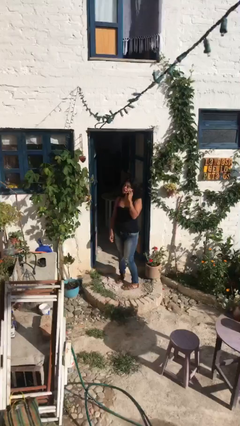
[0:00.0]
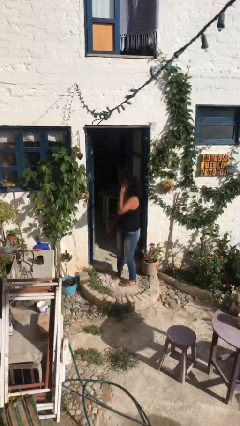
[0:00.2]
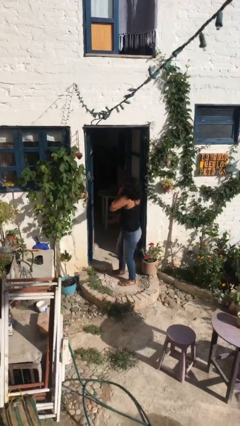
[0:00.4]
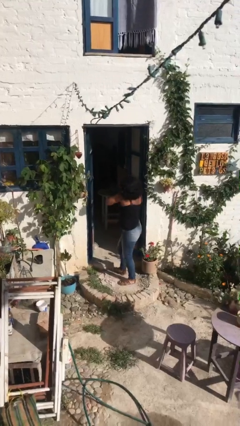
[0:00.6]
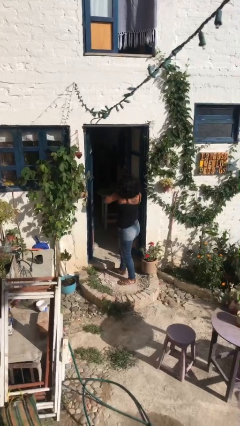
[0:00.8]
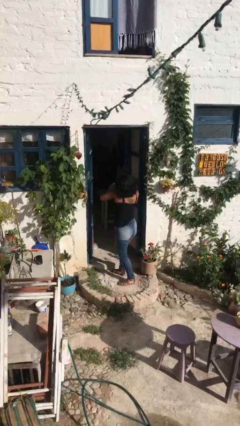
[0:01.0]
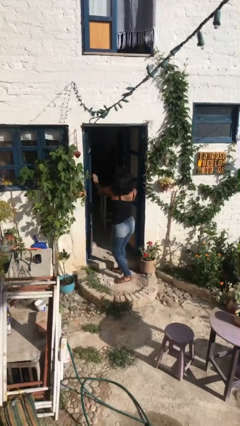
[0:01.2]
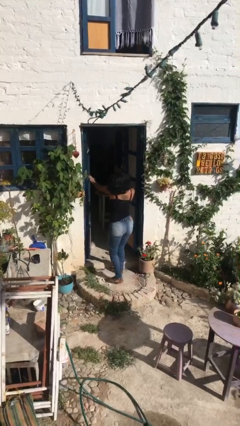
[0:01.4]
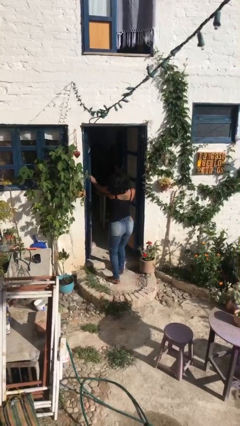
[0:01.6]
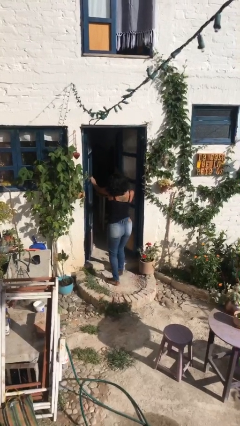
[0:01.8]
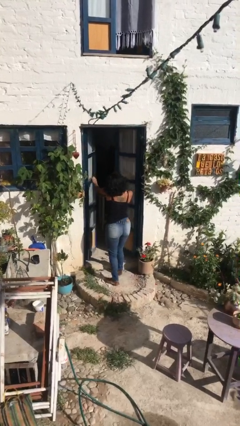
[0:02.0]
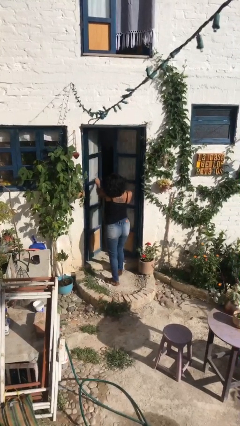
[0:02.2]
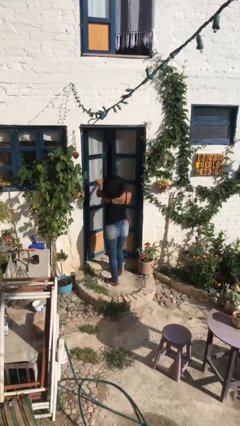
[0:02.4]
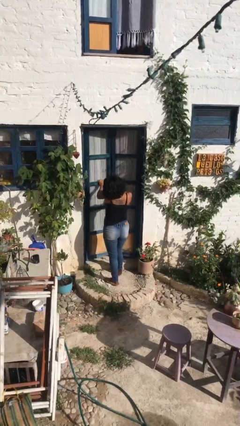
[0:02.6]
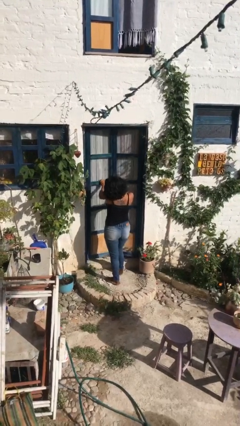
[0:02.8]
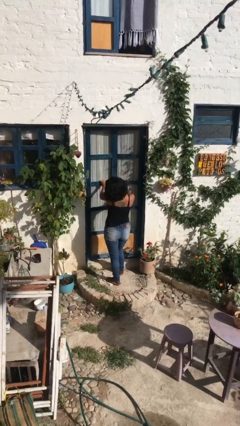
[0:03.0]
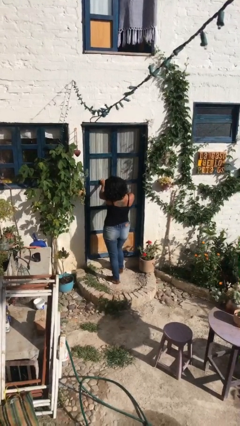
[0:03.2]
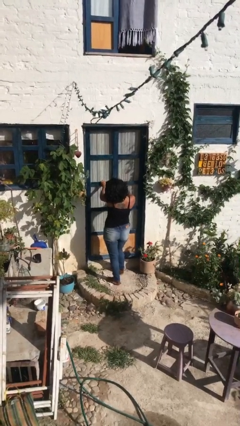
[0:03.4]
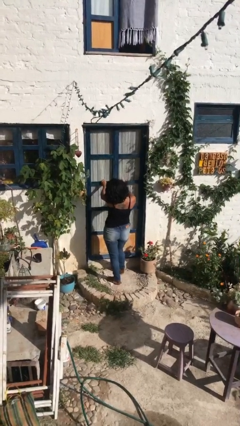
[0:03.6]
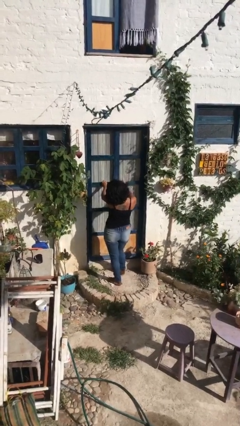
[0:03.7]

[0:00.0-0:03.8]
person closes facility door

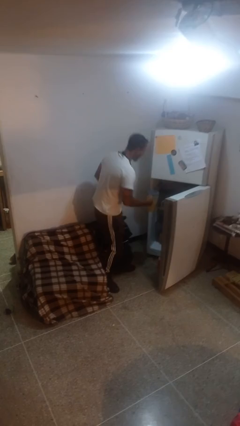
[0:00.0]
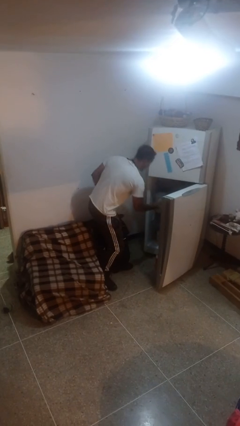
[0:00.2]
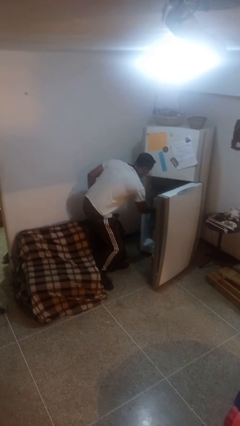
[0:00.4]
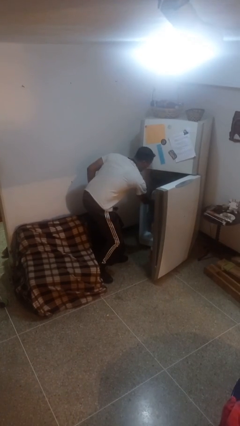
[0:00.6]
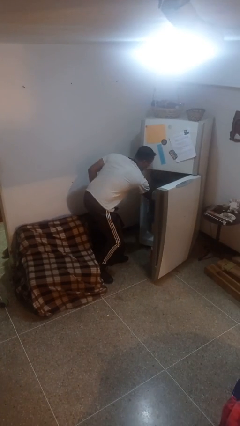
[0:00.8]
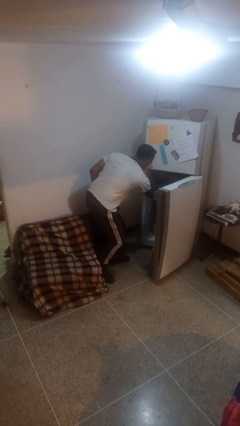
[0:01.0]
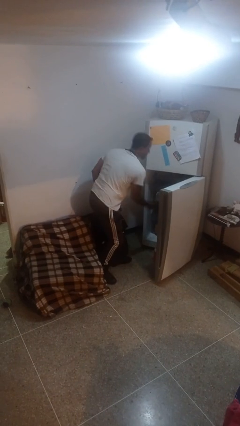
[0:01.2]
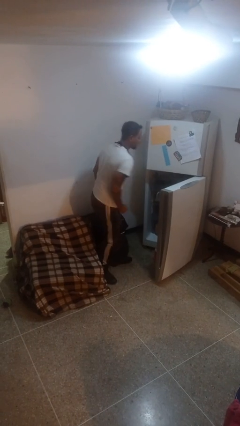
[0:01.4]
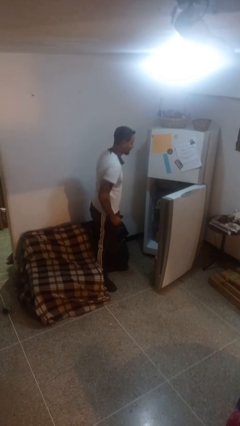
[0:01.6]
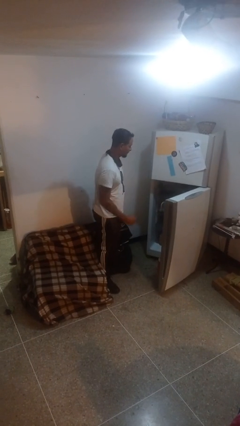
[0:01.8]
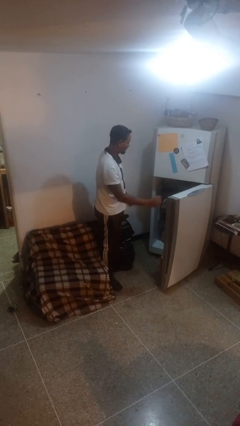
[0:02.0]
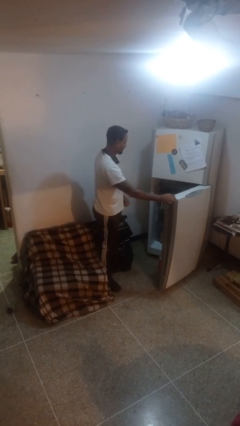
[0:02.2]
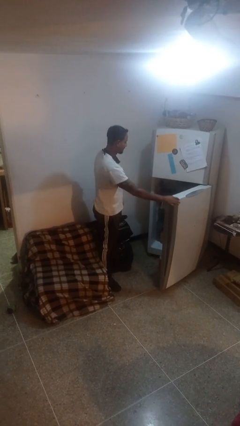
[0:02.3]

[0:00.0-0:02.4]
person puts object into refrigerator

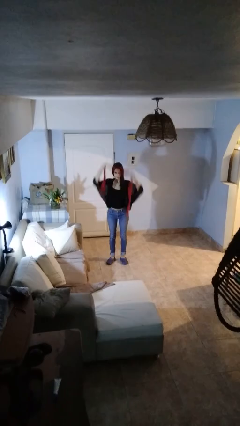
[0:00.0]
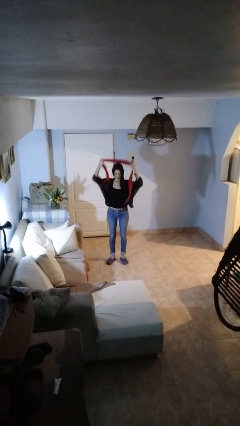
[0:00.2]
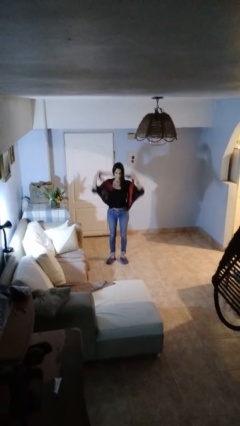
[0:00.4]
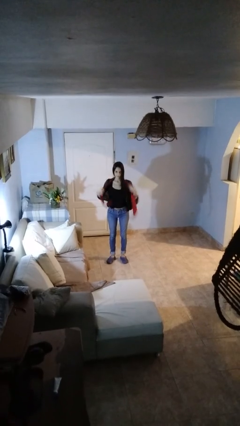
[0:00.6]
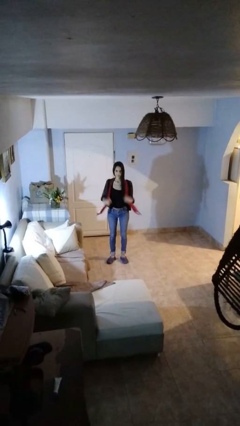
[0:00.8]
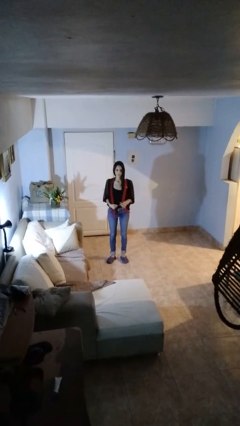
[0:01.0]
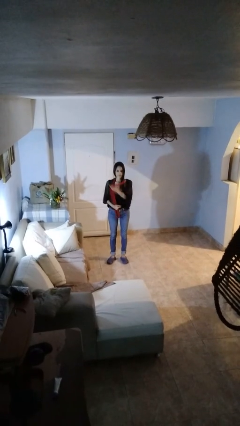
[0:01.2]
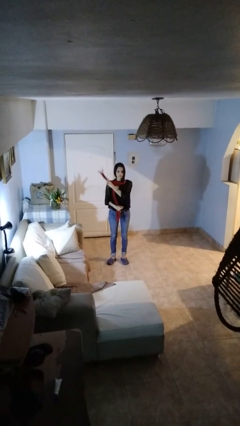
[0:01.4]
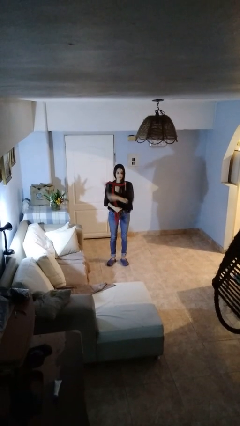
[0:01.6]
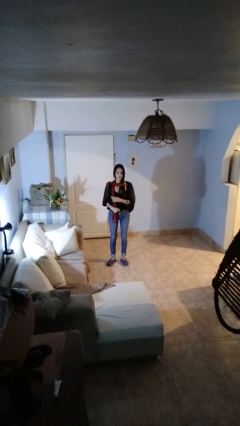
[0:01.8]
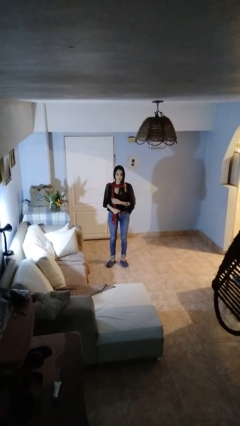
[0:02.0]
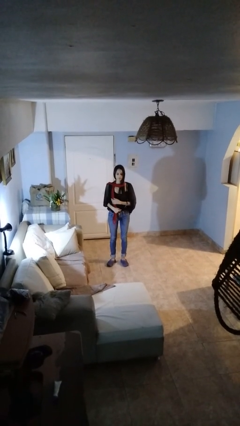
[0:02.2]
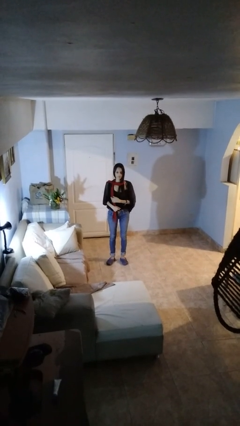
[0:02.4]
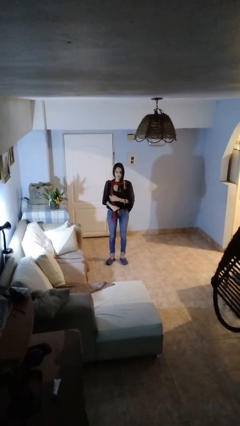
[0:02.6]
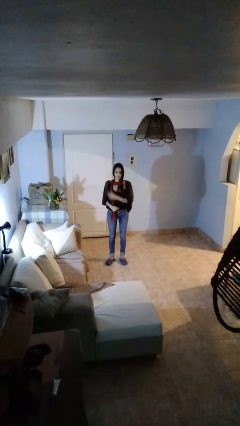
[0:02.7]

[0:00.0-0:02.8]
person puts on scarf

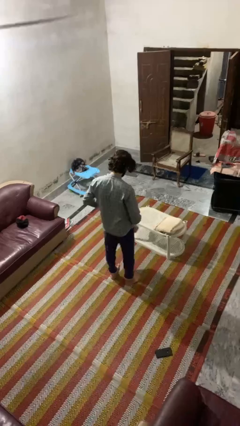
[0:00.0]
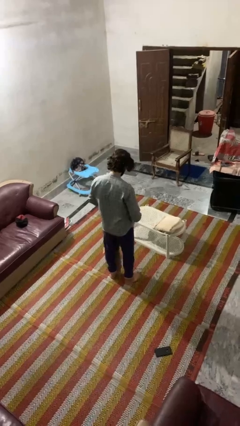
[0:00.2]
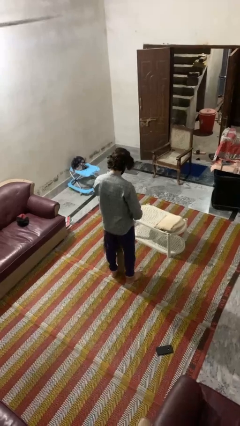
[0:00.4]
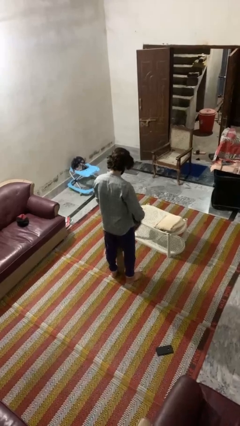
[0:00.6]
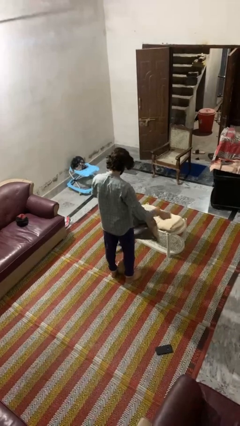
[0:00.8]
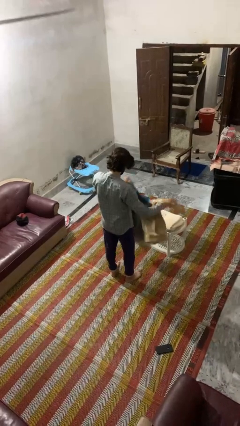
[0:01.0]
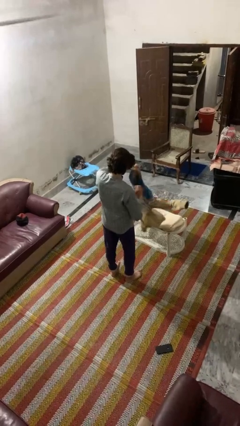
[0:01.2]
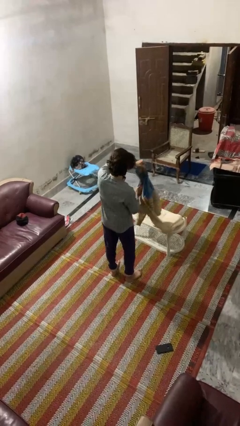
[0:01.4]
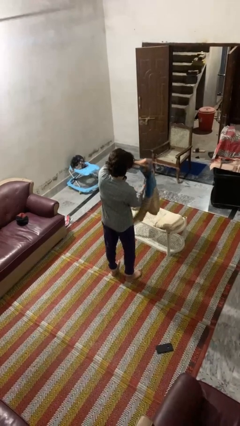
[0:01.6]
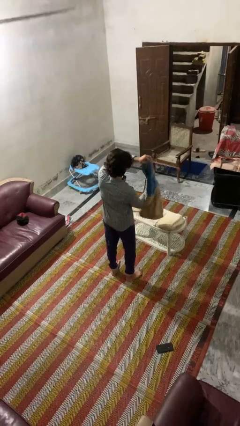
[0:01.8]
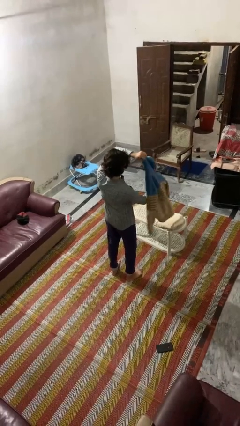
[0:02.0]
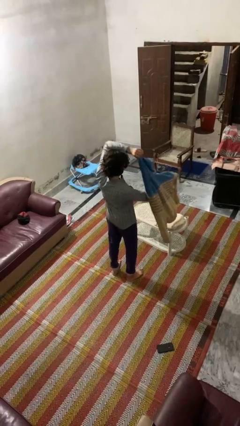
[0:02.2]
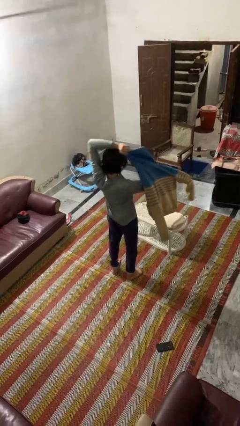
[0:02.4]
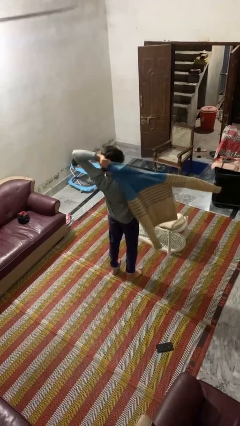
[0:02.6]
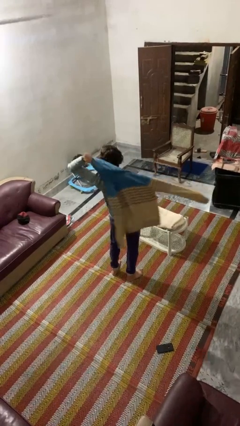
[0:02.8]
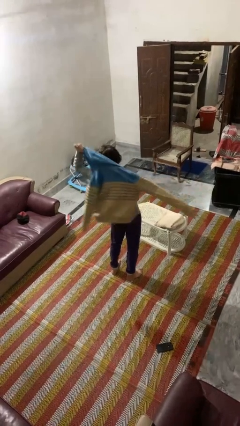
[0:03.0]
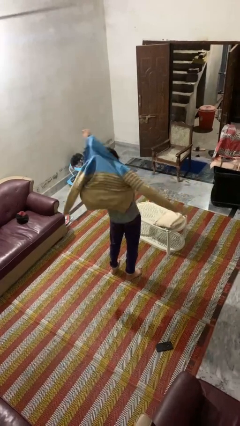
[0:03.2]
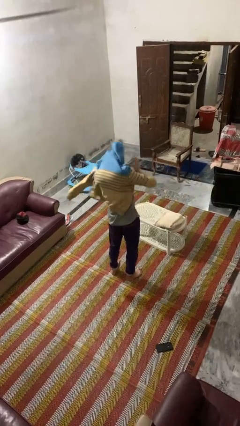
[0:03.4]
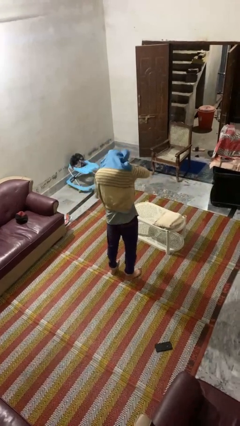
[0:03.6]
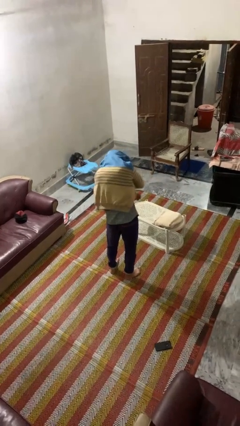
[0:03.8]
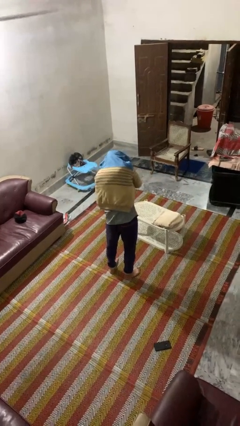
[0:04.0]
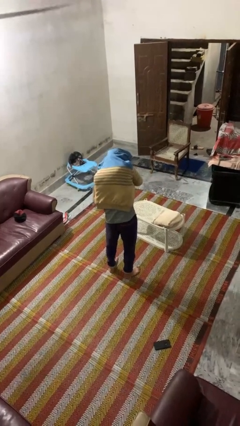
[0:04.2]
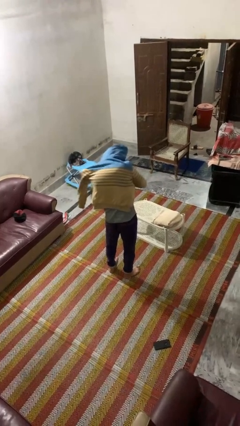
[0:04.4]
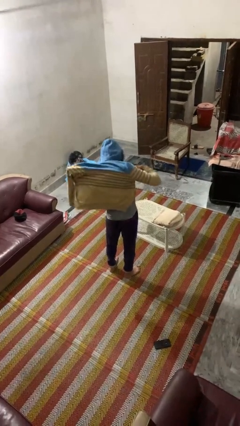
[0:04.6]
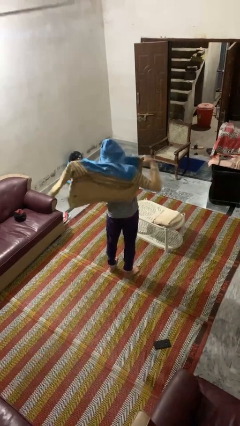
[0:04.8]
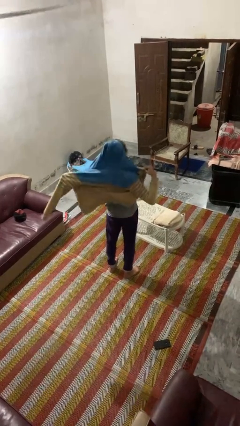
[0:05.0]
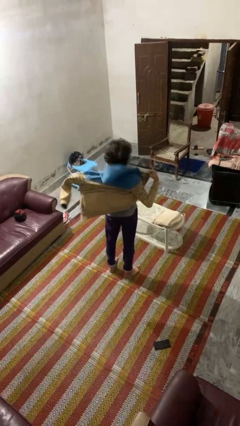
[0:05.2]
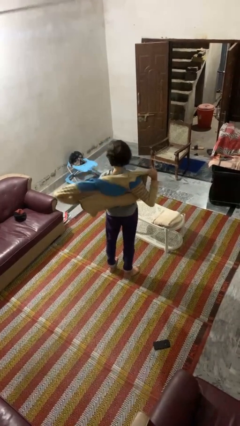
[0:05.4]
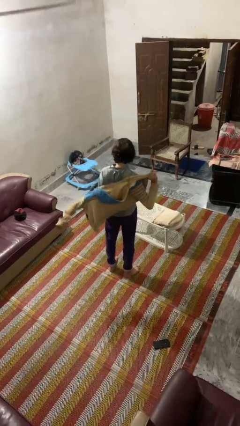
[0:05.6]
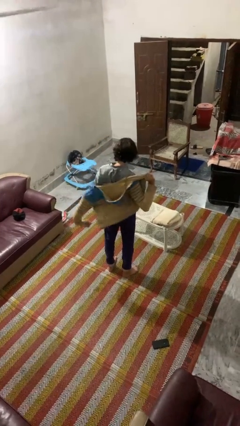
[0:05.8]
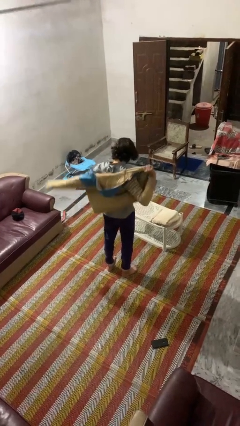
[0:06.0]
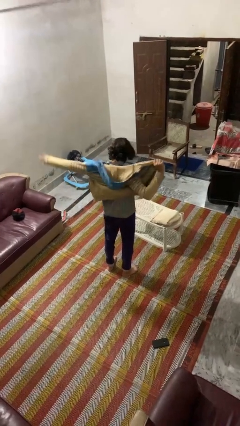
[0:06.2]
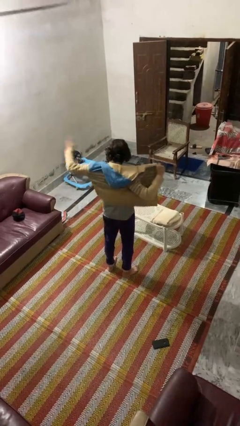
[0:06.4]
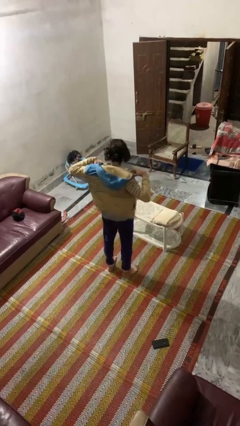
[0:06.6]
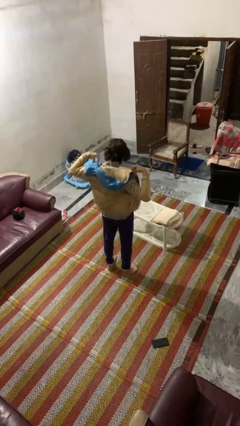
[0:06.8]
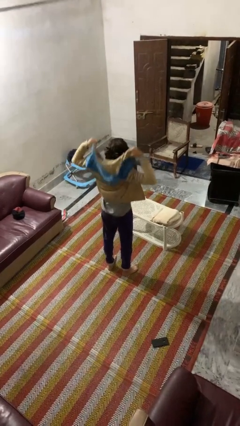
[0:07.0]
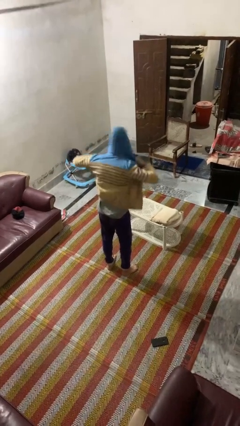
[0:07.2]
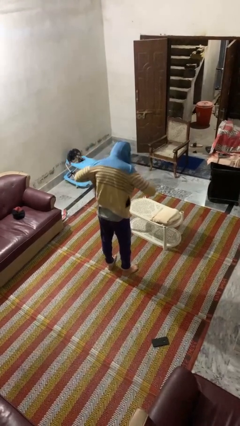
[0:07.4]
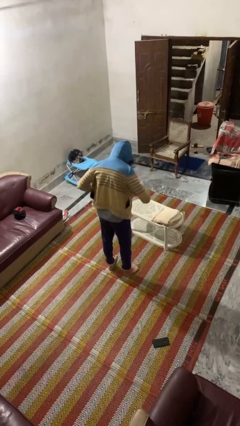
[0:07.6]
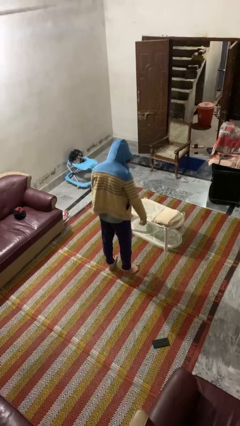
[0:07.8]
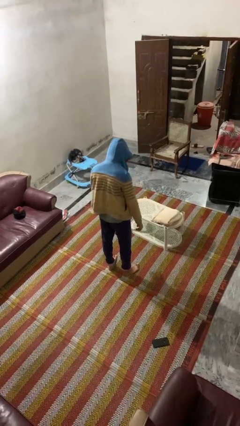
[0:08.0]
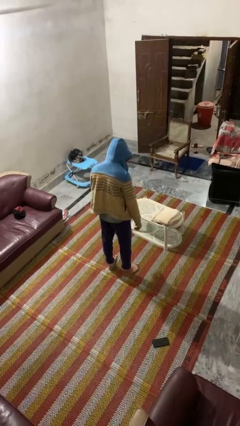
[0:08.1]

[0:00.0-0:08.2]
person puts on hoodie

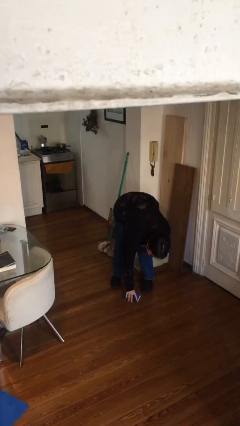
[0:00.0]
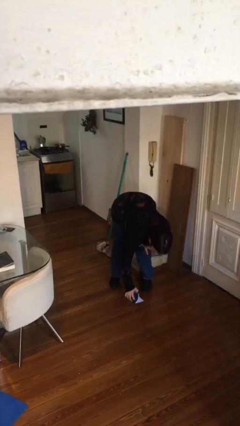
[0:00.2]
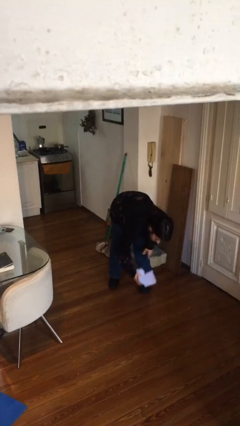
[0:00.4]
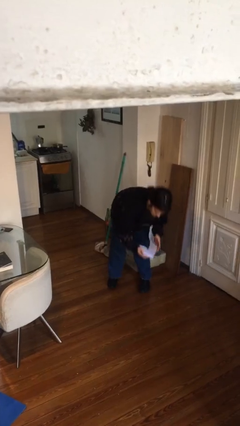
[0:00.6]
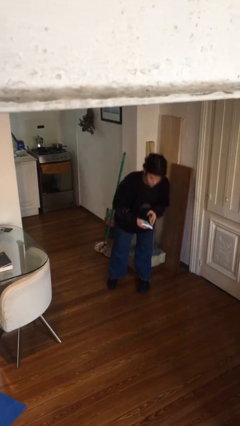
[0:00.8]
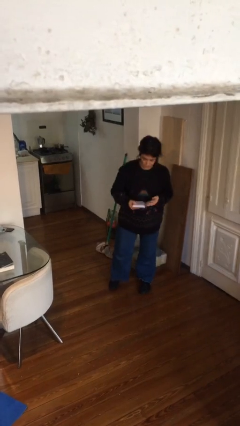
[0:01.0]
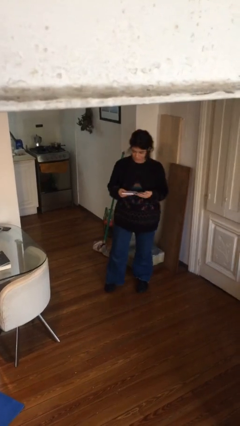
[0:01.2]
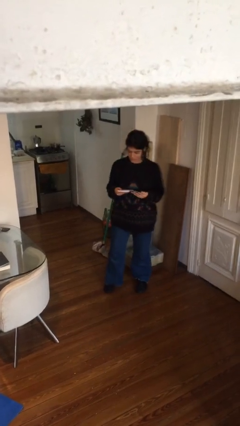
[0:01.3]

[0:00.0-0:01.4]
person picks up object from floor
